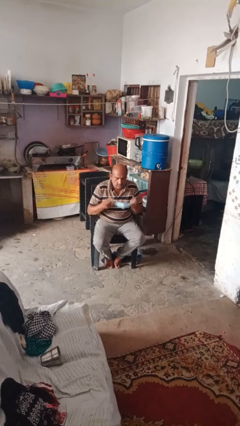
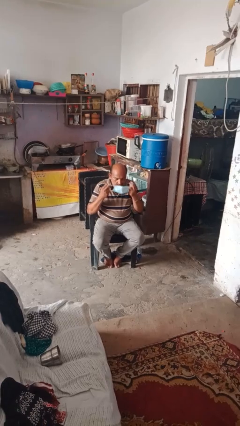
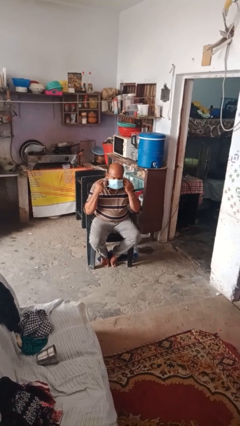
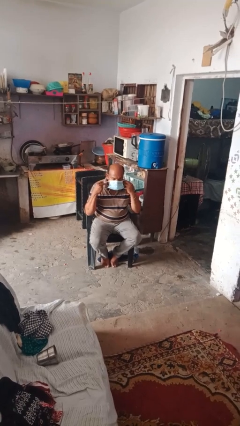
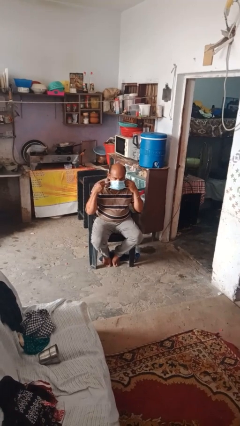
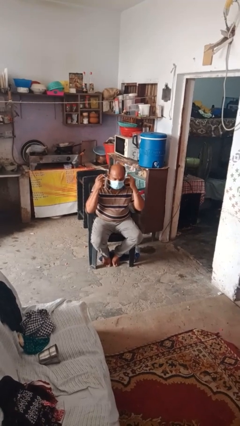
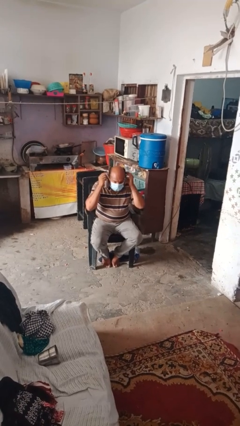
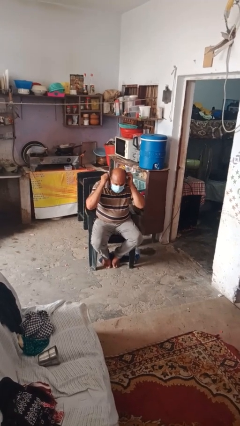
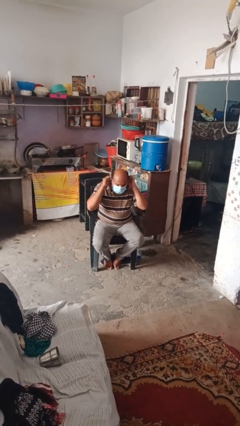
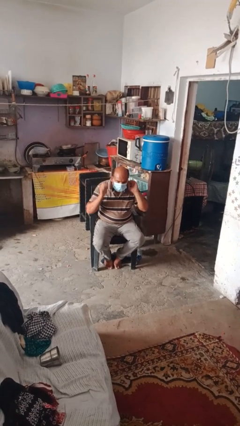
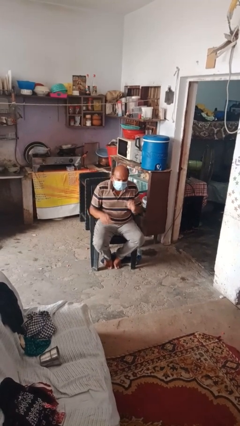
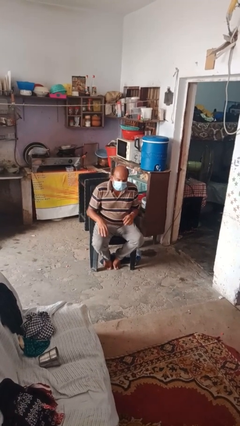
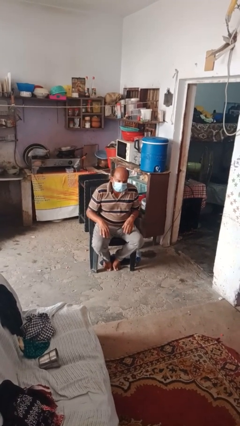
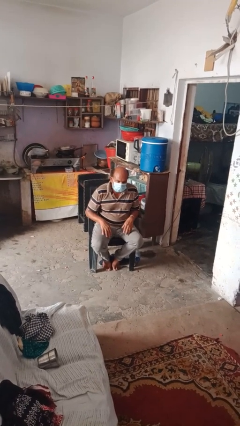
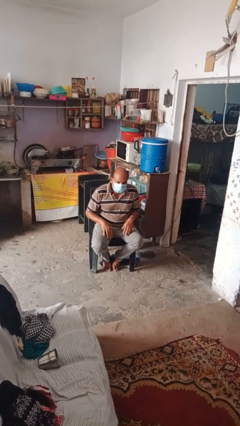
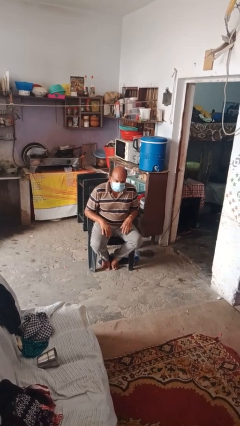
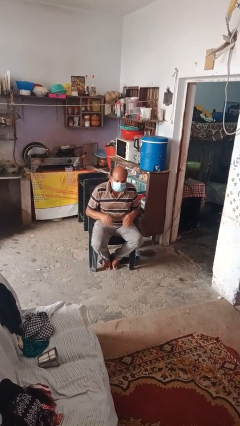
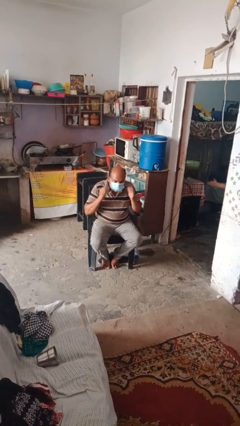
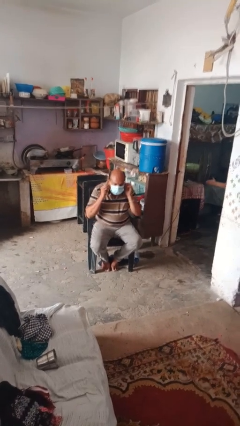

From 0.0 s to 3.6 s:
person puts on facemask

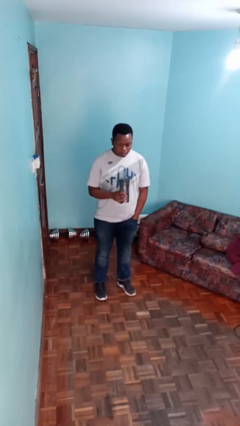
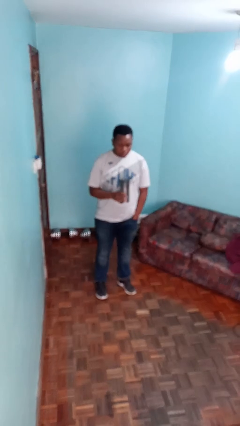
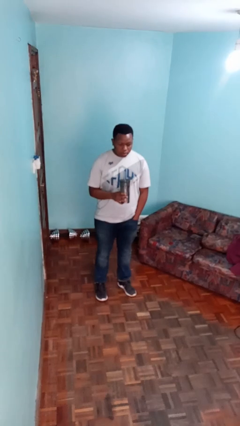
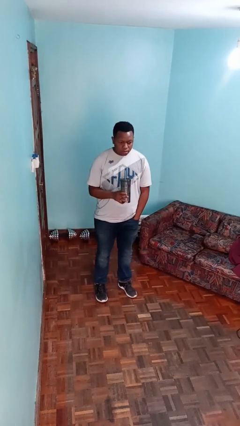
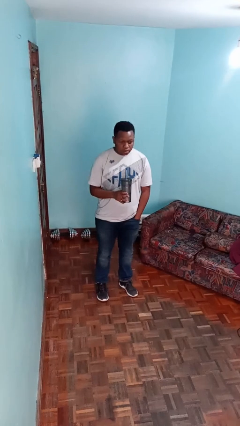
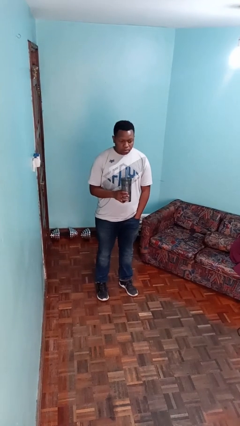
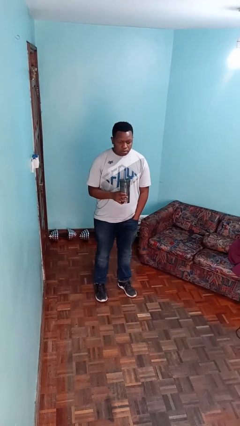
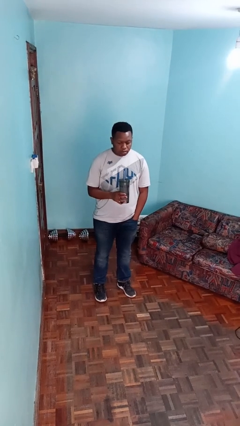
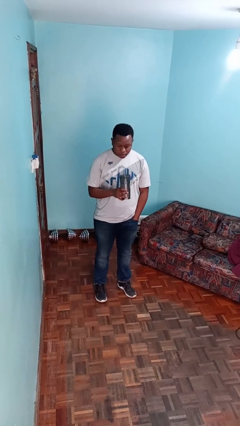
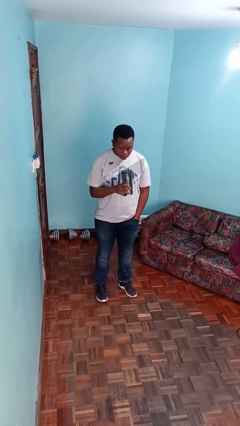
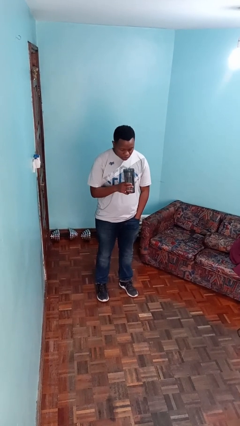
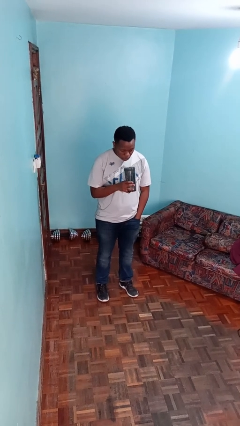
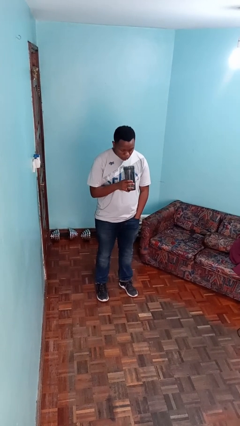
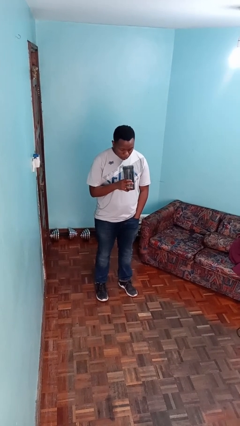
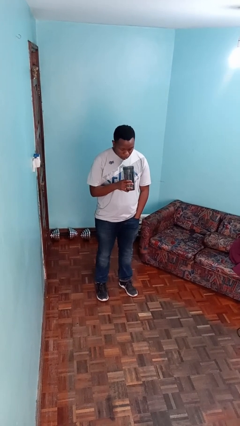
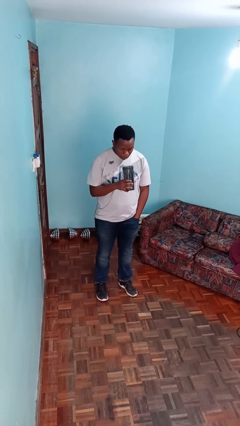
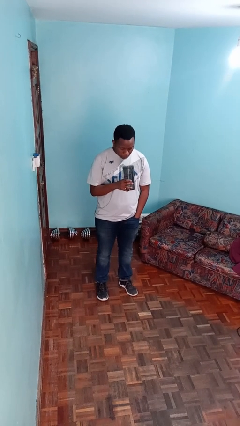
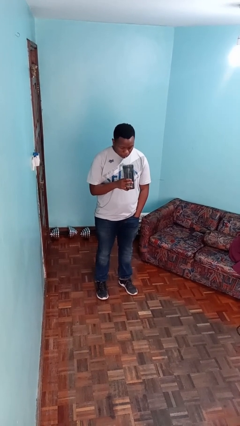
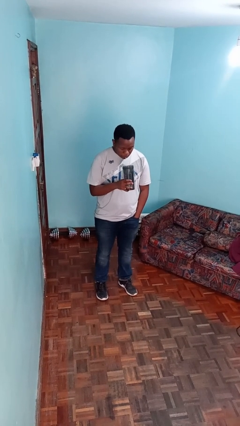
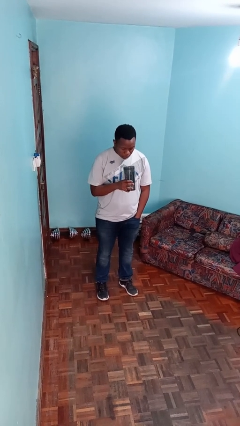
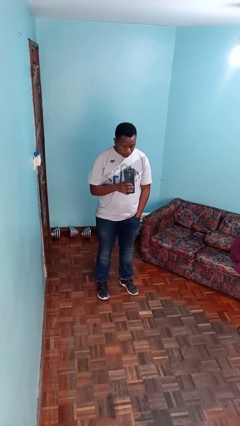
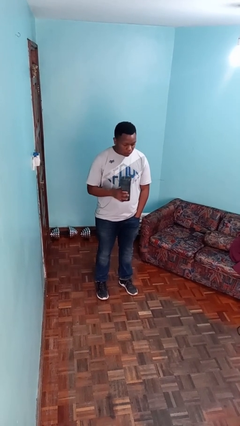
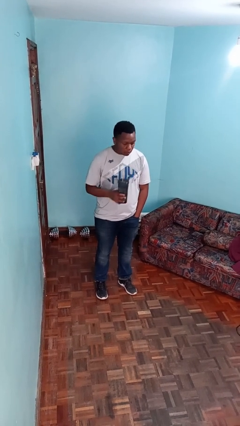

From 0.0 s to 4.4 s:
person drinks from straw

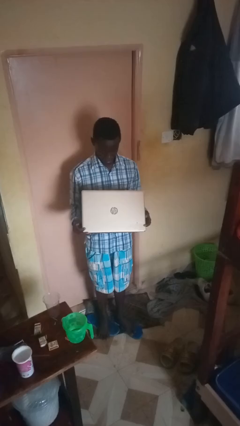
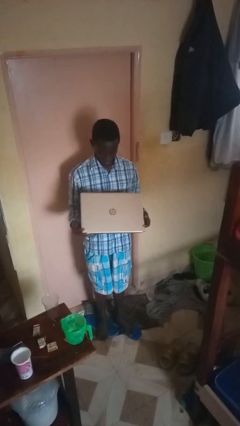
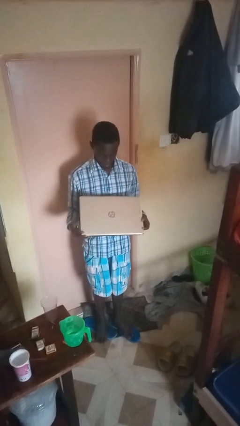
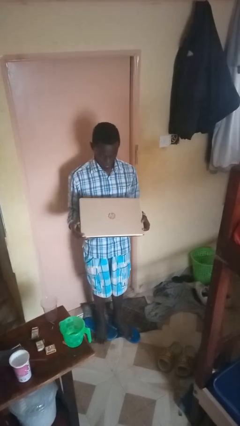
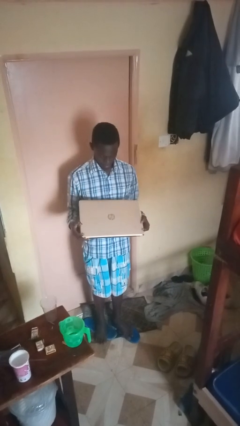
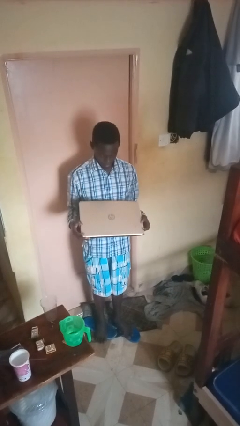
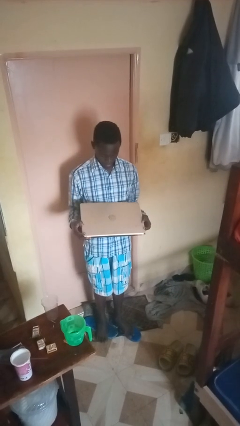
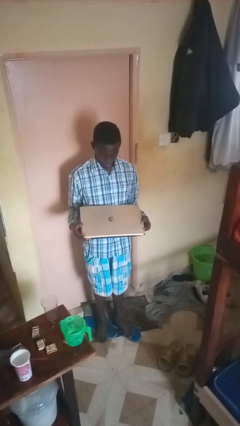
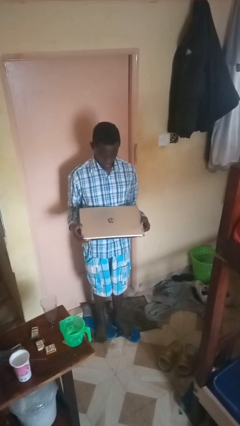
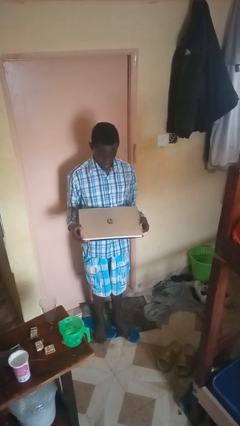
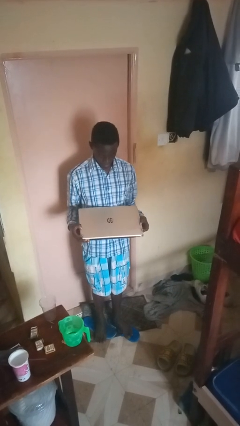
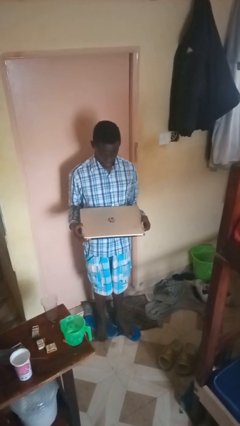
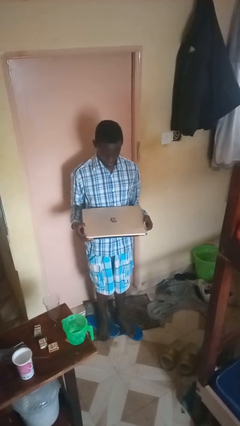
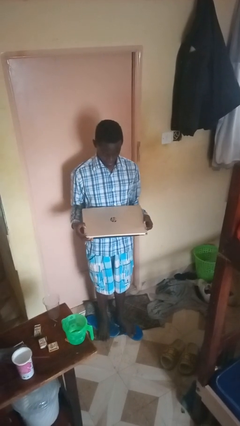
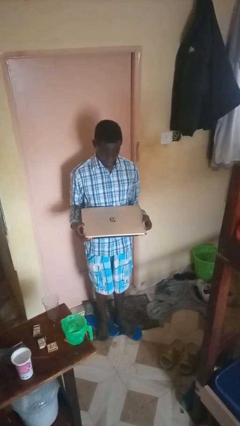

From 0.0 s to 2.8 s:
person closes laptop

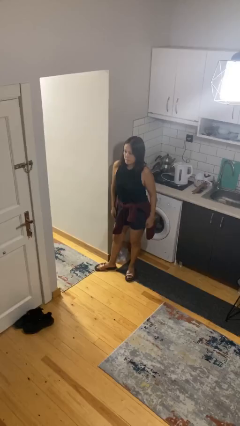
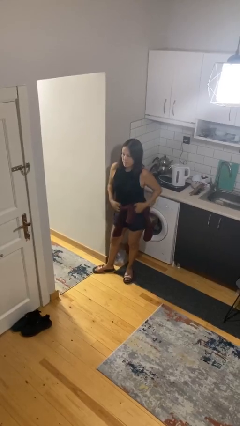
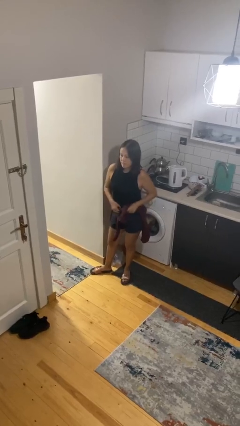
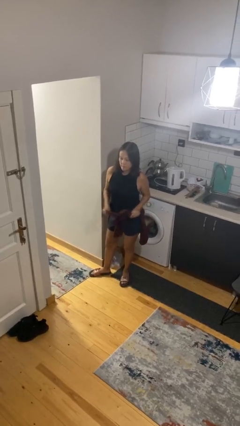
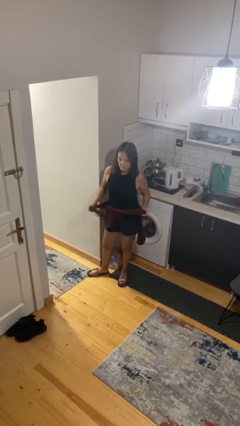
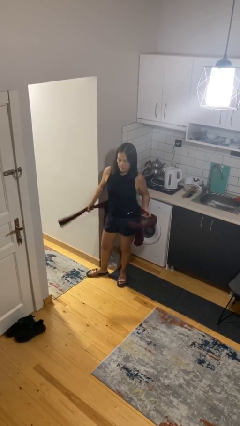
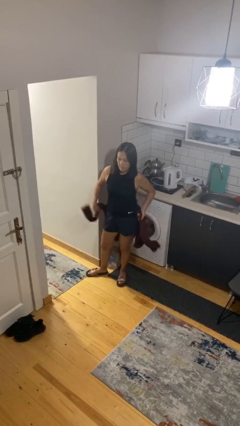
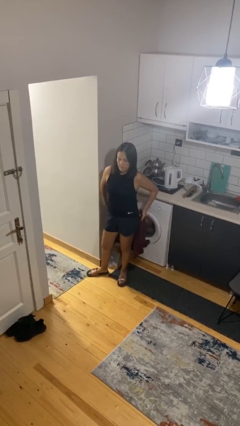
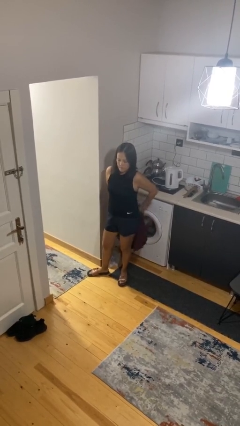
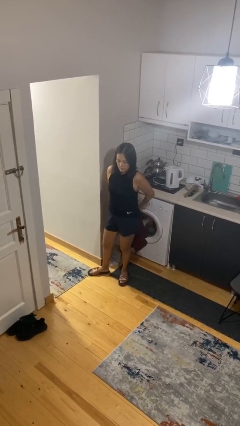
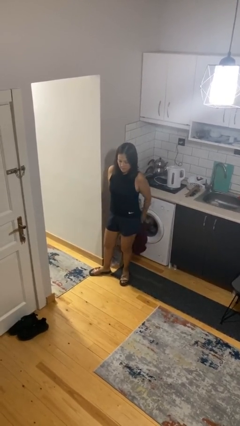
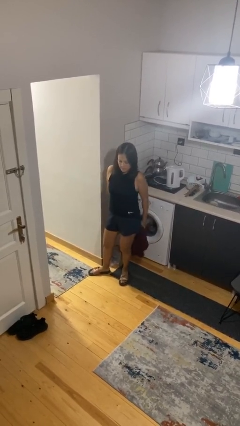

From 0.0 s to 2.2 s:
person unties jacket around waist

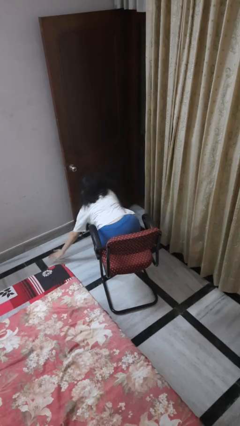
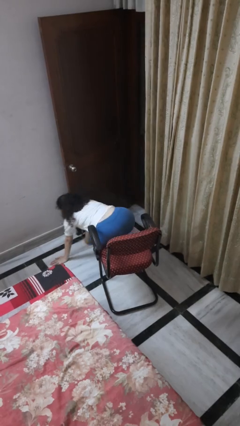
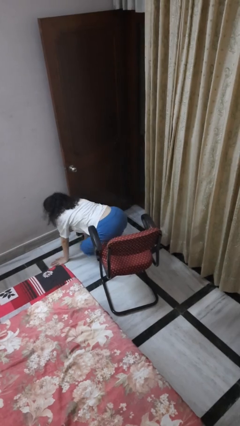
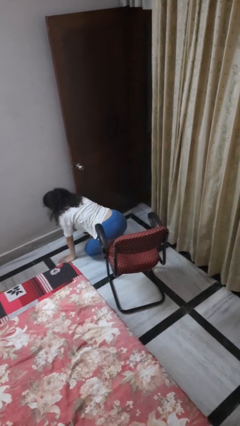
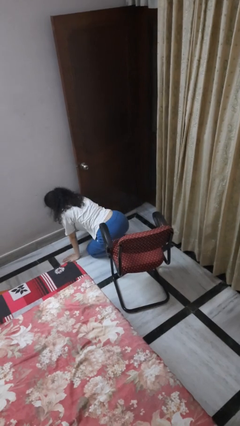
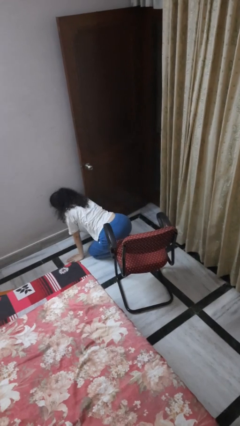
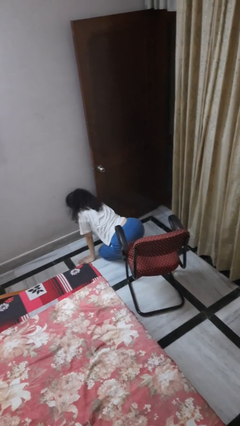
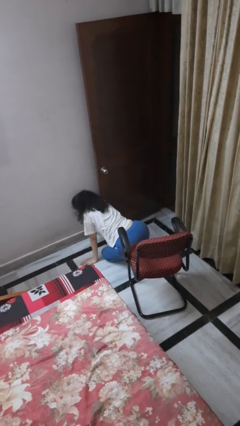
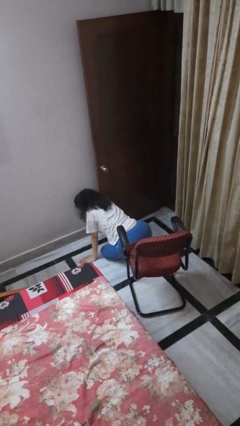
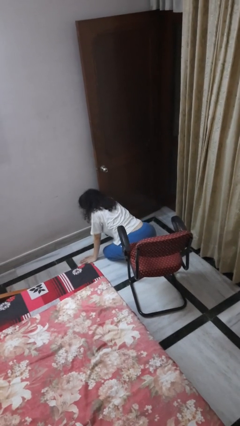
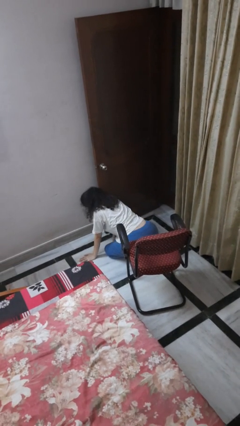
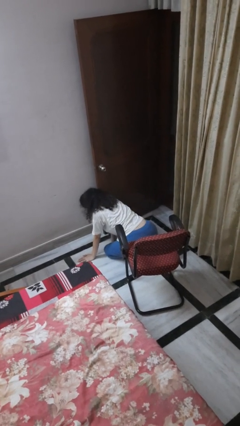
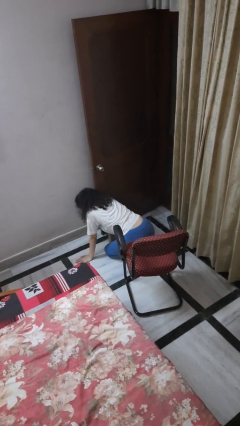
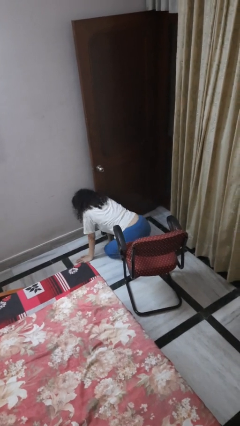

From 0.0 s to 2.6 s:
person falls from chair

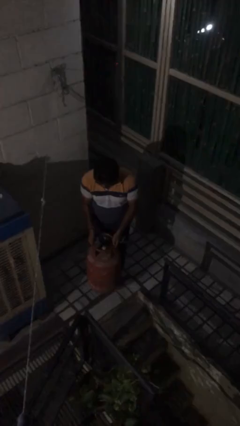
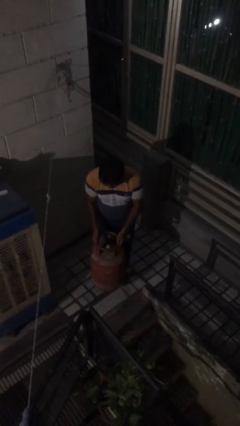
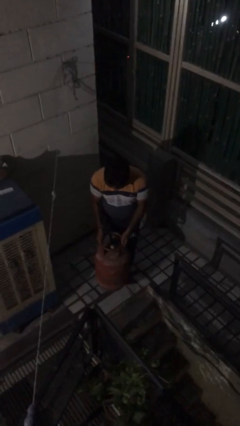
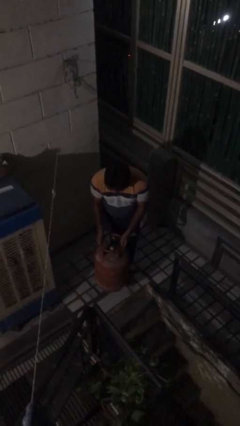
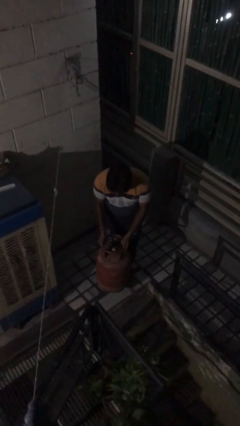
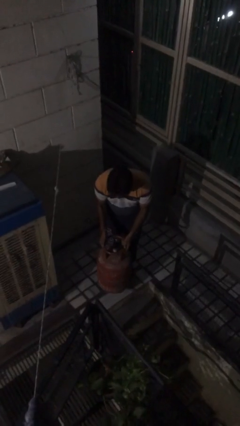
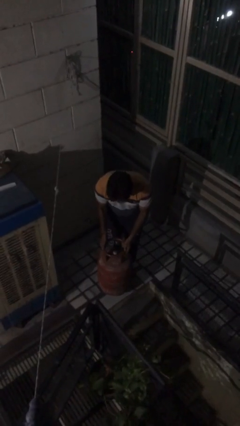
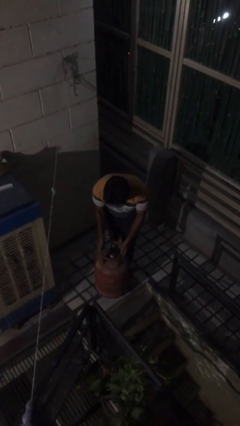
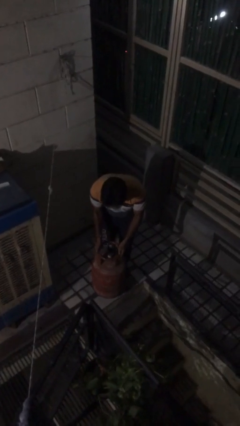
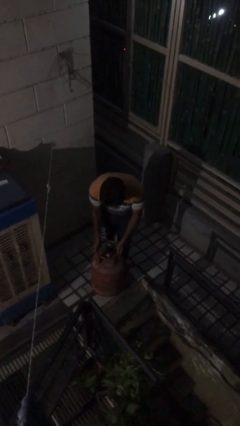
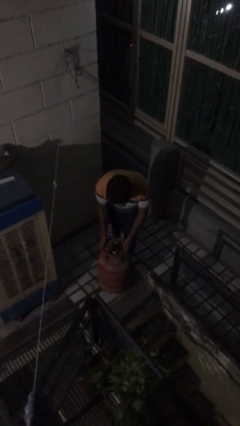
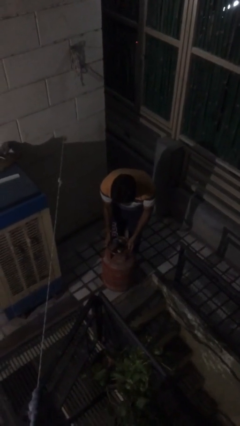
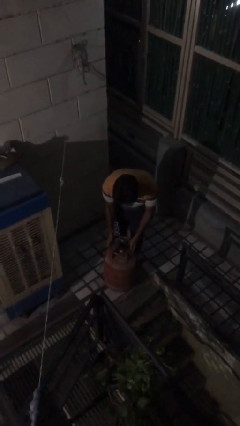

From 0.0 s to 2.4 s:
person puts down object on floor
